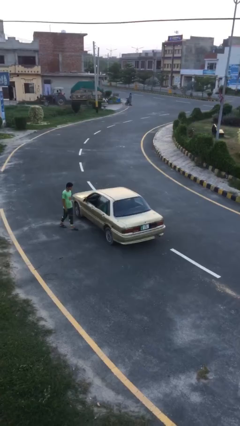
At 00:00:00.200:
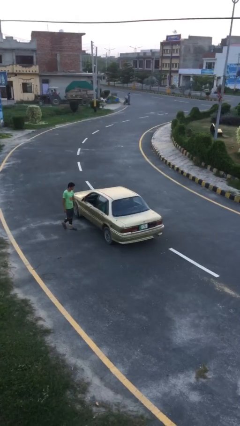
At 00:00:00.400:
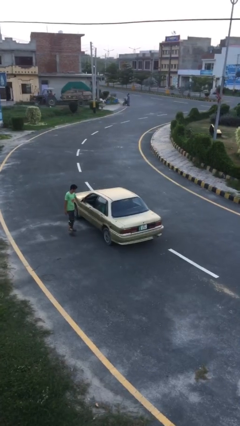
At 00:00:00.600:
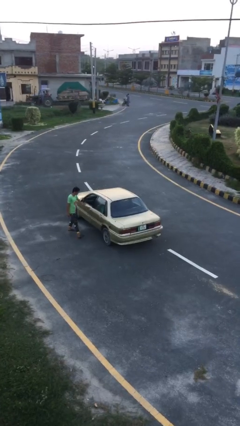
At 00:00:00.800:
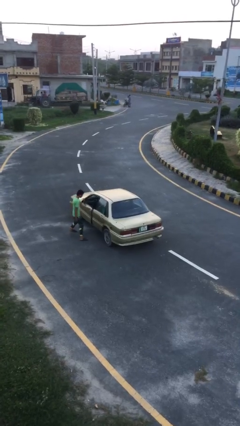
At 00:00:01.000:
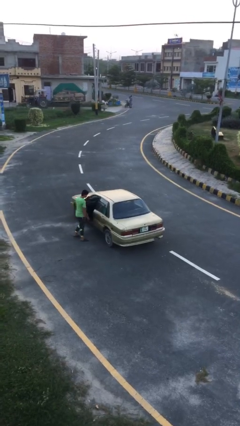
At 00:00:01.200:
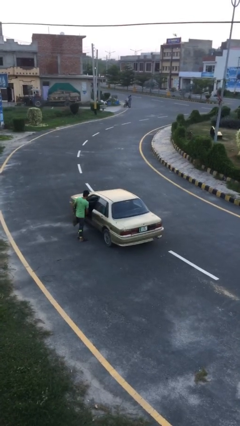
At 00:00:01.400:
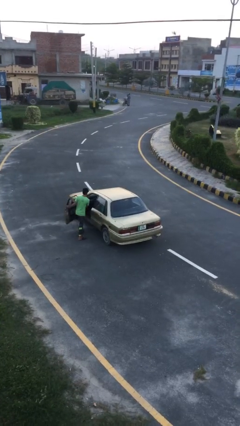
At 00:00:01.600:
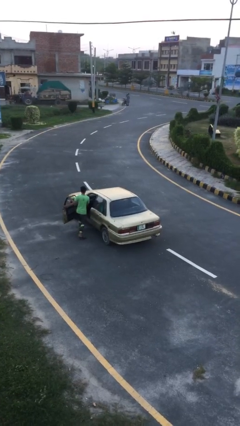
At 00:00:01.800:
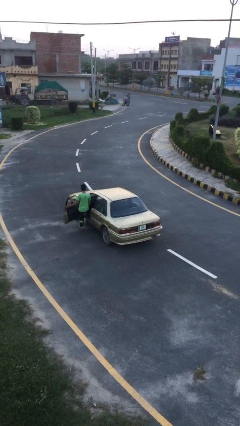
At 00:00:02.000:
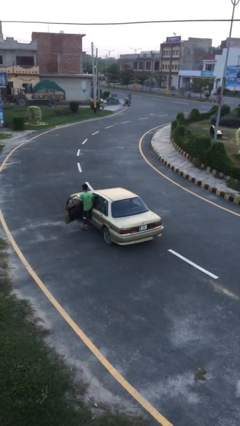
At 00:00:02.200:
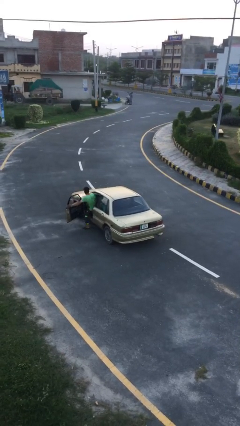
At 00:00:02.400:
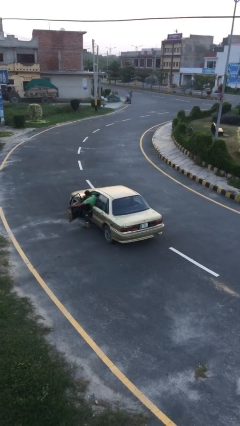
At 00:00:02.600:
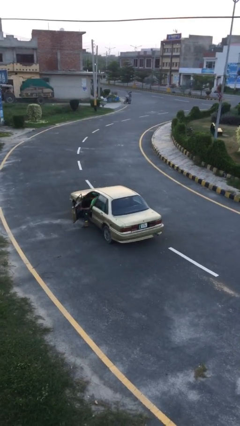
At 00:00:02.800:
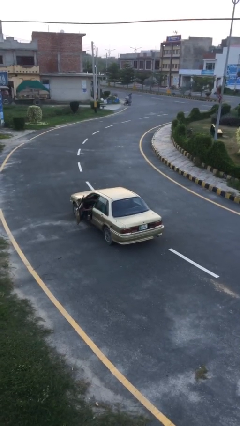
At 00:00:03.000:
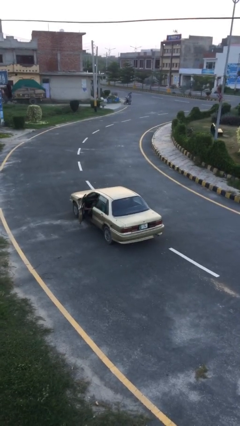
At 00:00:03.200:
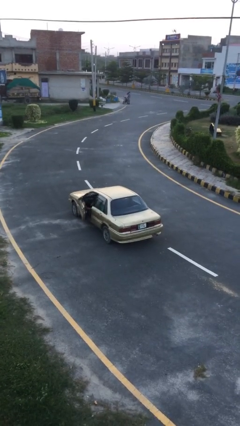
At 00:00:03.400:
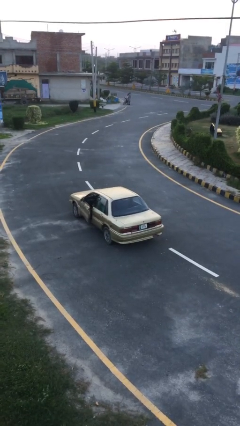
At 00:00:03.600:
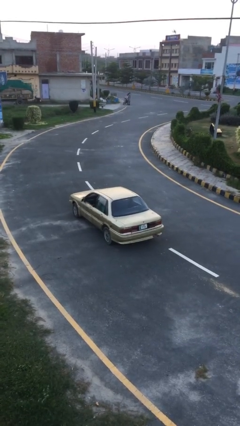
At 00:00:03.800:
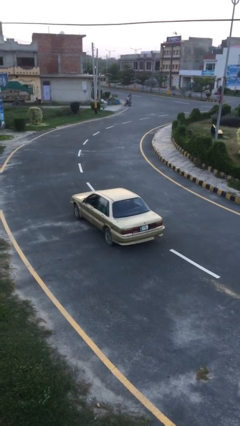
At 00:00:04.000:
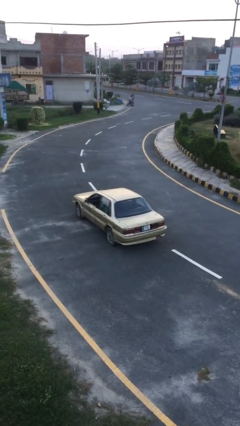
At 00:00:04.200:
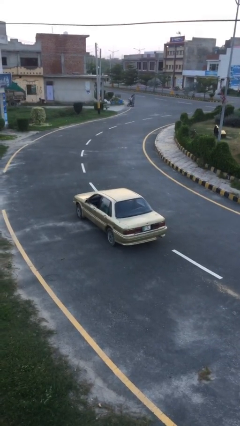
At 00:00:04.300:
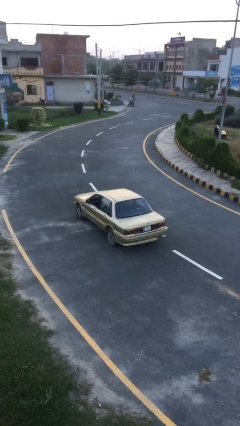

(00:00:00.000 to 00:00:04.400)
car picks up person

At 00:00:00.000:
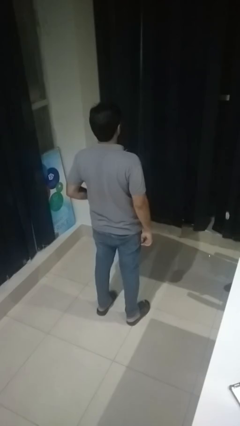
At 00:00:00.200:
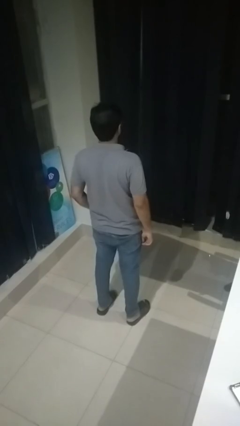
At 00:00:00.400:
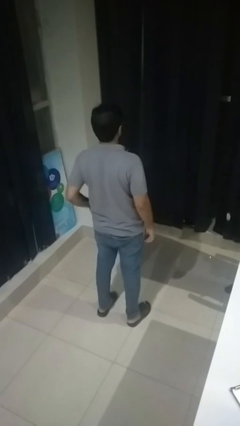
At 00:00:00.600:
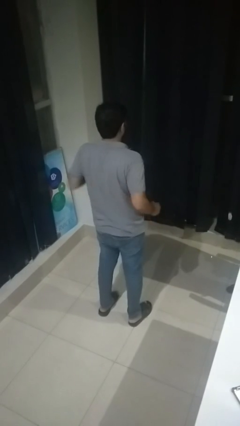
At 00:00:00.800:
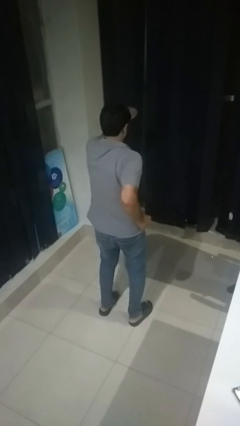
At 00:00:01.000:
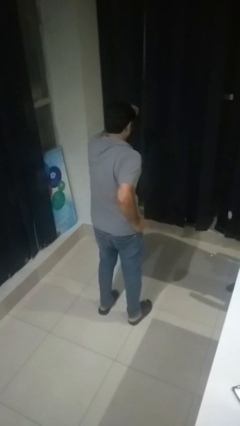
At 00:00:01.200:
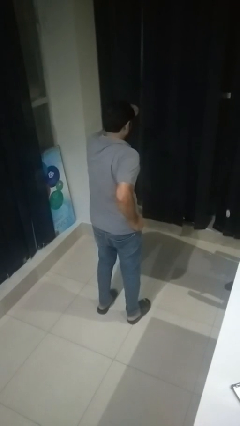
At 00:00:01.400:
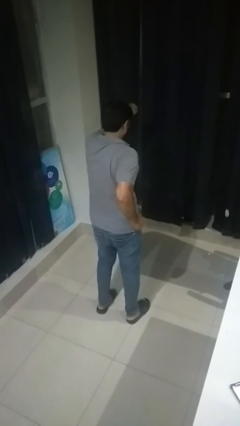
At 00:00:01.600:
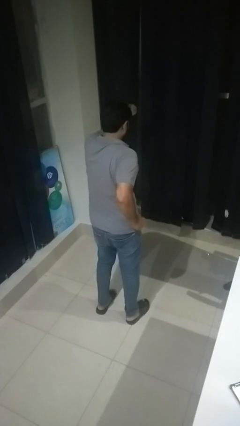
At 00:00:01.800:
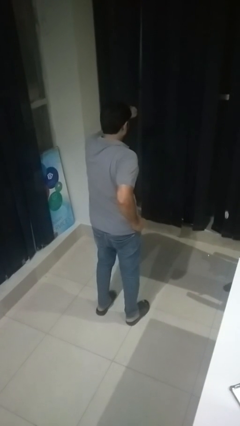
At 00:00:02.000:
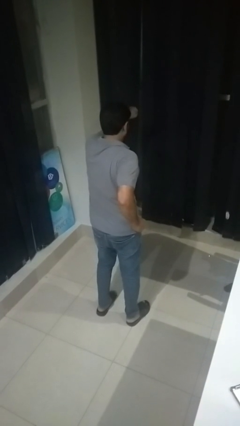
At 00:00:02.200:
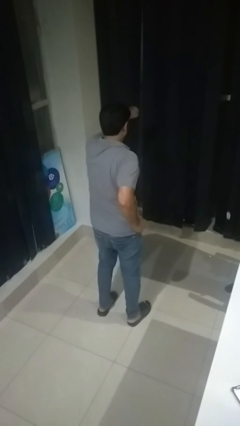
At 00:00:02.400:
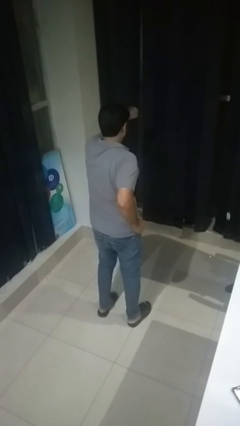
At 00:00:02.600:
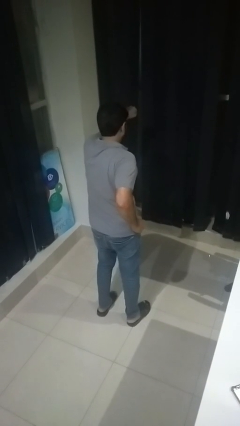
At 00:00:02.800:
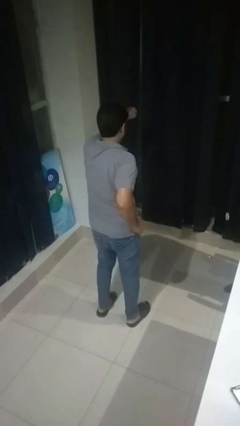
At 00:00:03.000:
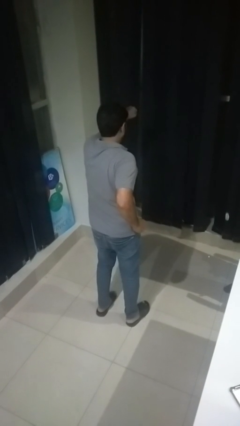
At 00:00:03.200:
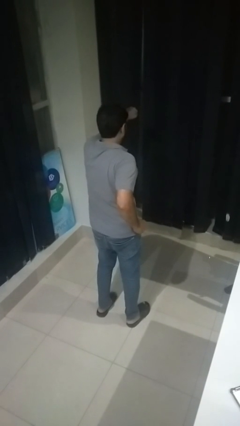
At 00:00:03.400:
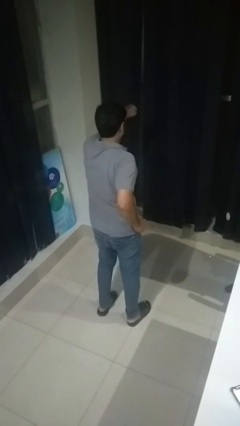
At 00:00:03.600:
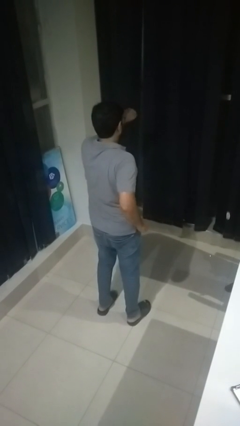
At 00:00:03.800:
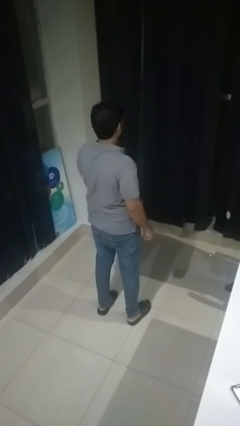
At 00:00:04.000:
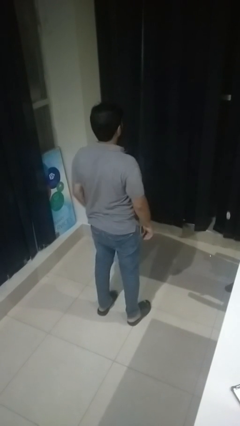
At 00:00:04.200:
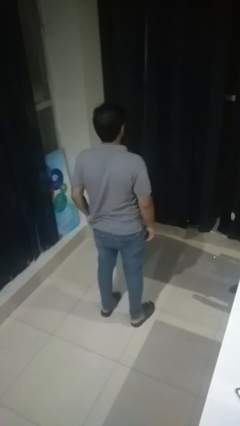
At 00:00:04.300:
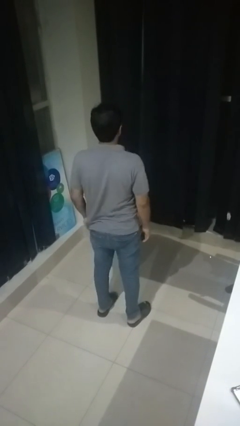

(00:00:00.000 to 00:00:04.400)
person punches

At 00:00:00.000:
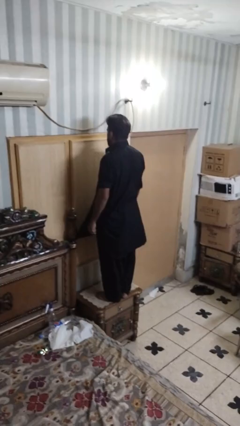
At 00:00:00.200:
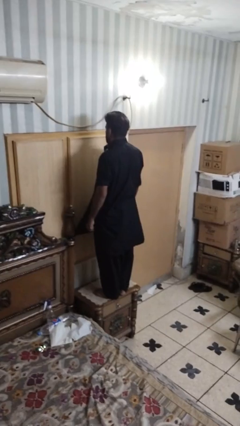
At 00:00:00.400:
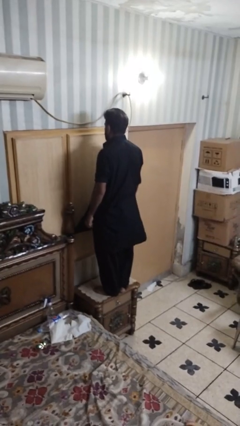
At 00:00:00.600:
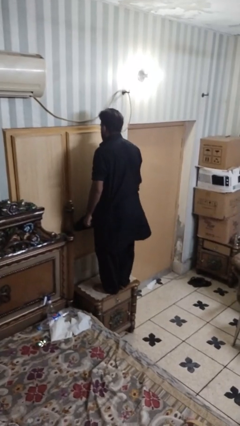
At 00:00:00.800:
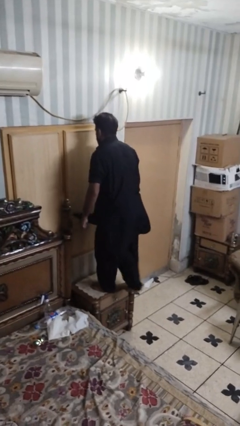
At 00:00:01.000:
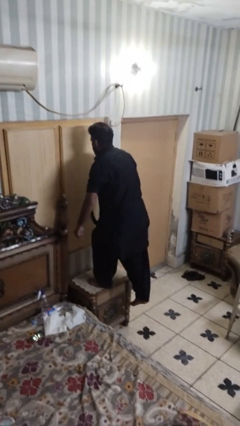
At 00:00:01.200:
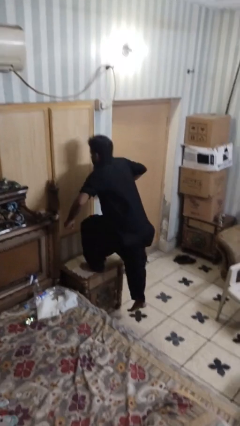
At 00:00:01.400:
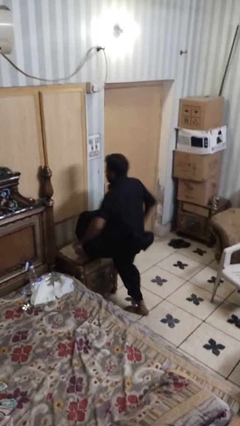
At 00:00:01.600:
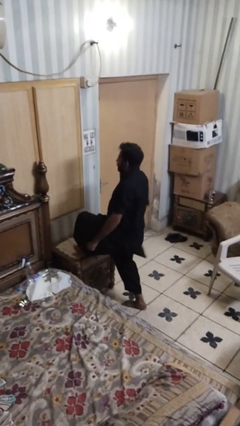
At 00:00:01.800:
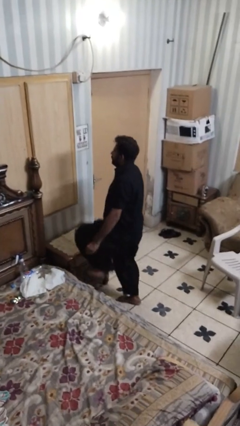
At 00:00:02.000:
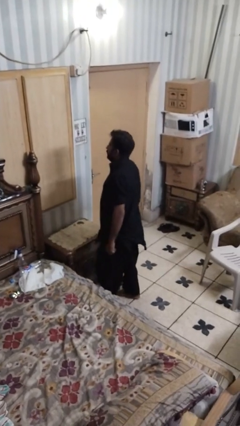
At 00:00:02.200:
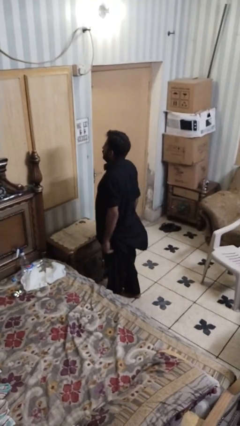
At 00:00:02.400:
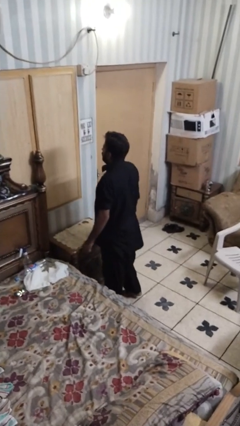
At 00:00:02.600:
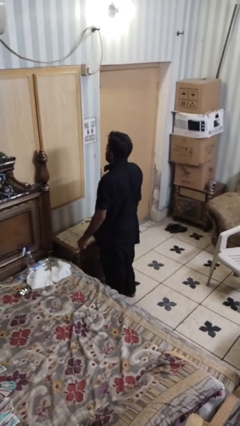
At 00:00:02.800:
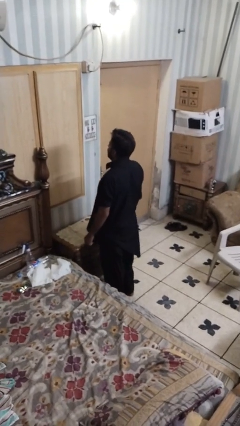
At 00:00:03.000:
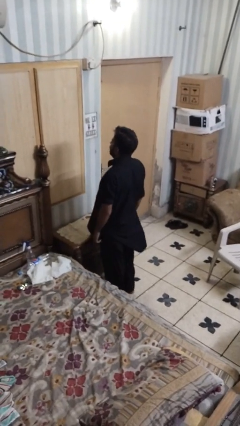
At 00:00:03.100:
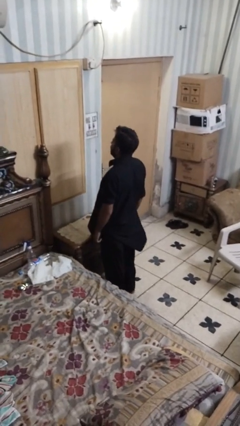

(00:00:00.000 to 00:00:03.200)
person climbs off table

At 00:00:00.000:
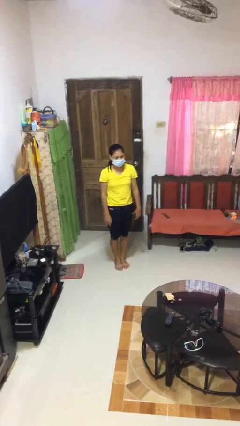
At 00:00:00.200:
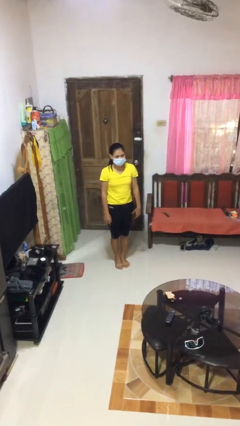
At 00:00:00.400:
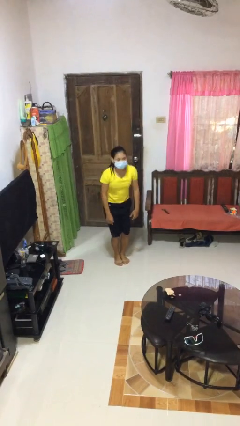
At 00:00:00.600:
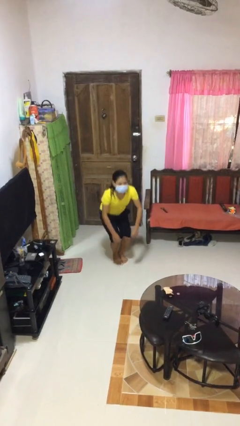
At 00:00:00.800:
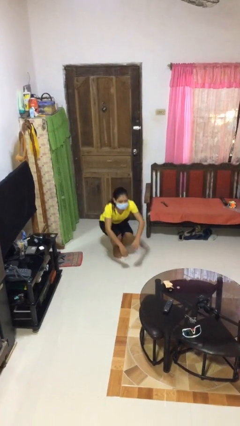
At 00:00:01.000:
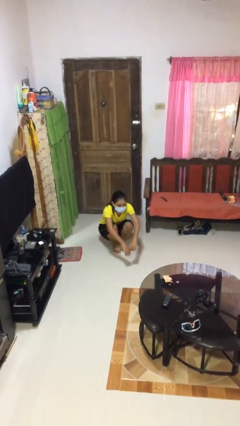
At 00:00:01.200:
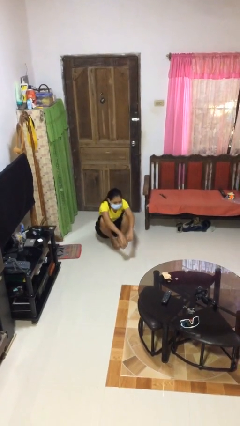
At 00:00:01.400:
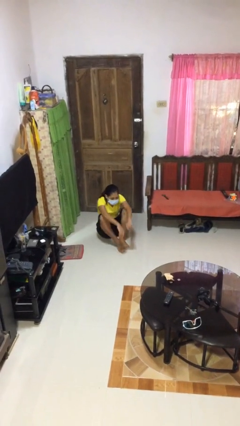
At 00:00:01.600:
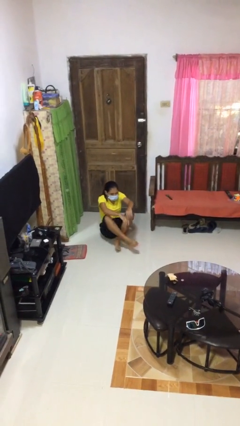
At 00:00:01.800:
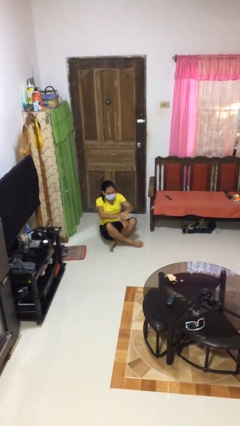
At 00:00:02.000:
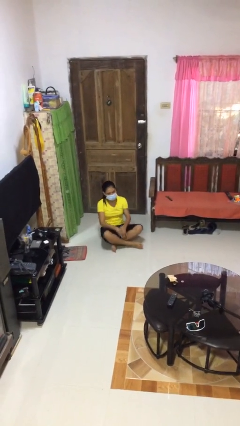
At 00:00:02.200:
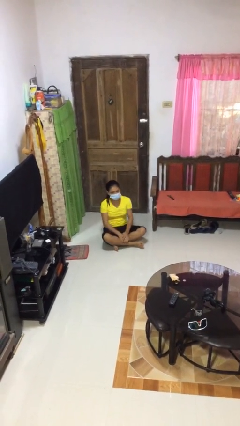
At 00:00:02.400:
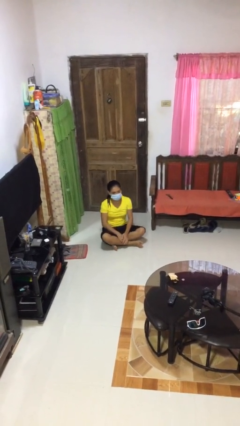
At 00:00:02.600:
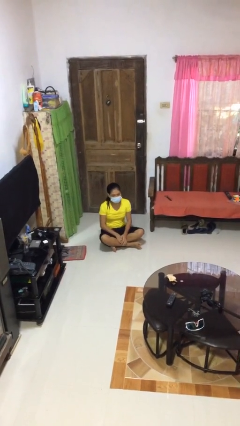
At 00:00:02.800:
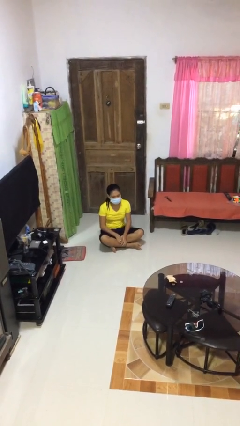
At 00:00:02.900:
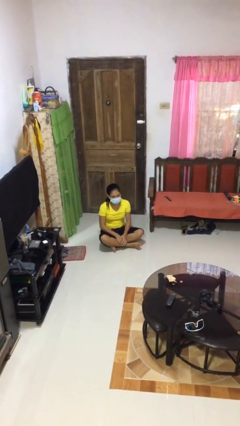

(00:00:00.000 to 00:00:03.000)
person sits crisscross

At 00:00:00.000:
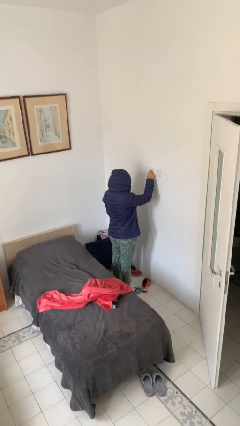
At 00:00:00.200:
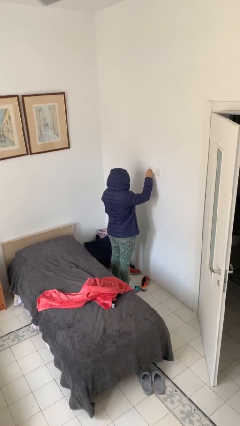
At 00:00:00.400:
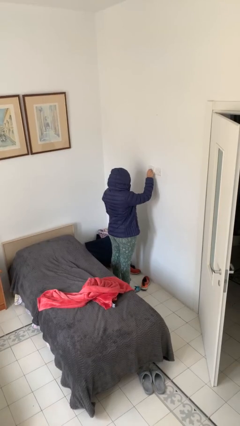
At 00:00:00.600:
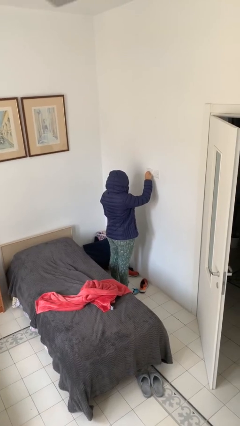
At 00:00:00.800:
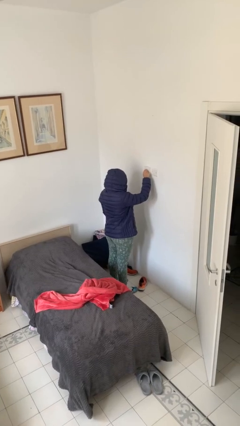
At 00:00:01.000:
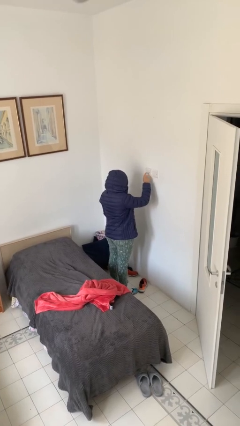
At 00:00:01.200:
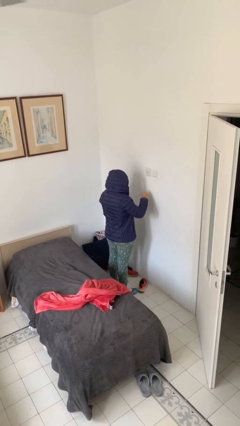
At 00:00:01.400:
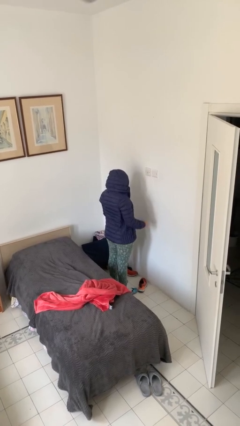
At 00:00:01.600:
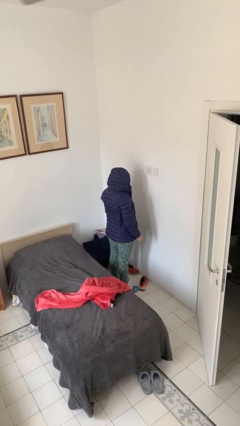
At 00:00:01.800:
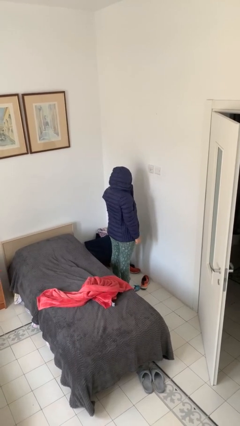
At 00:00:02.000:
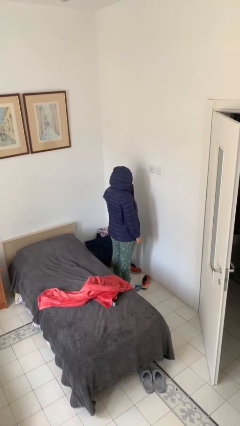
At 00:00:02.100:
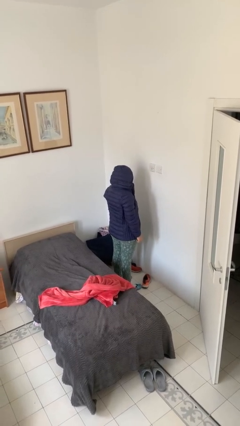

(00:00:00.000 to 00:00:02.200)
person turns off fan
